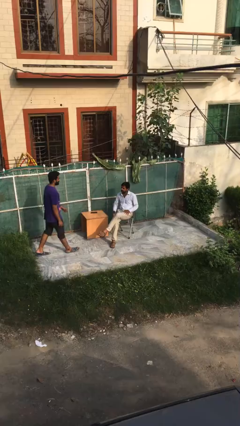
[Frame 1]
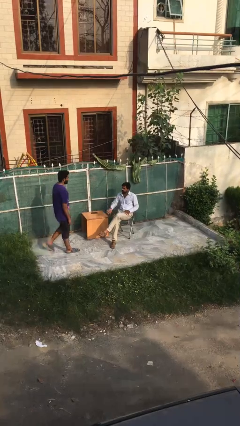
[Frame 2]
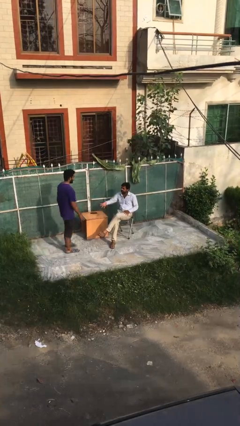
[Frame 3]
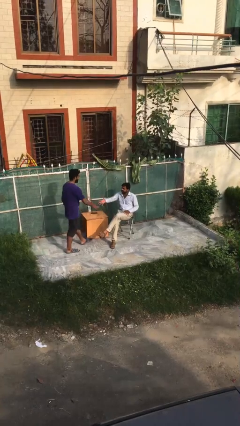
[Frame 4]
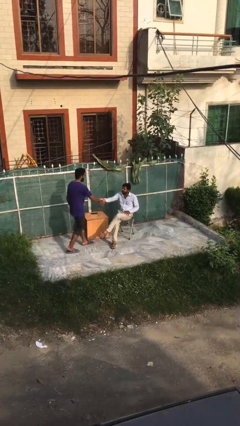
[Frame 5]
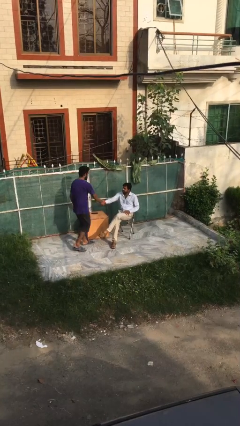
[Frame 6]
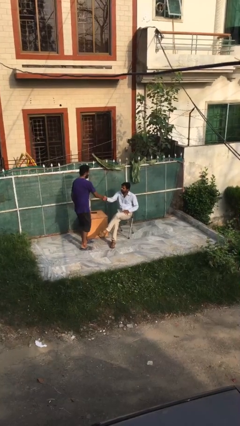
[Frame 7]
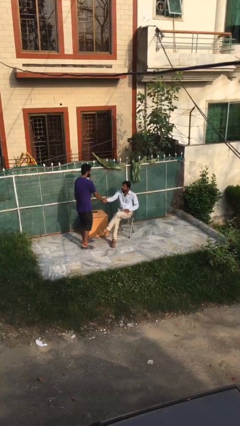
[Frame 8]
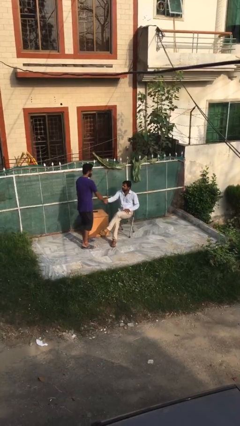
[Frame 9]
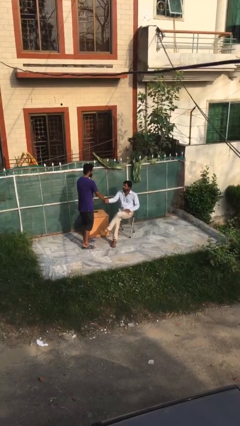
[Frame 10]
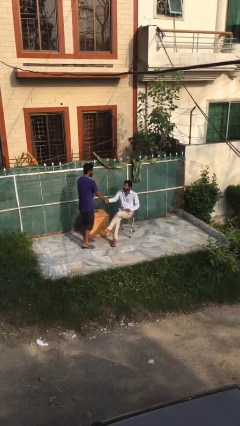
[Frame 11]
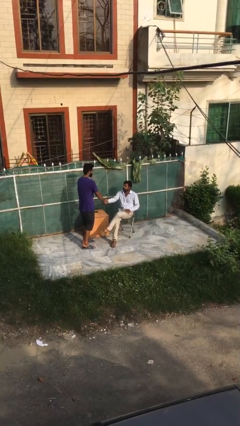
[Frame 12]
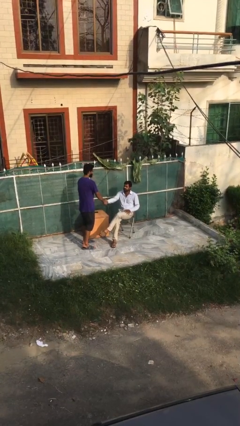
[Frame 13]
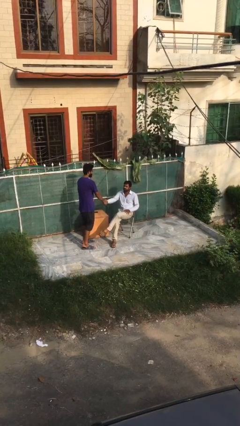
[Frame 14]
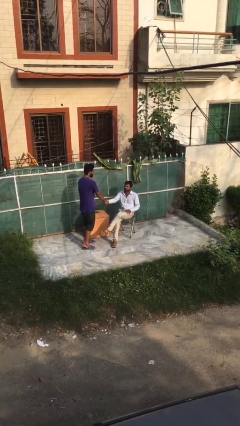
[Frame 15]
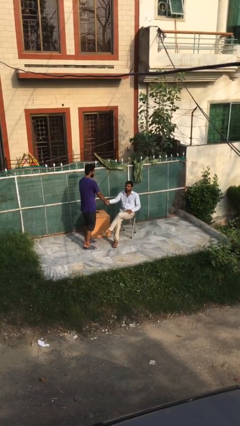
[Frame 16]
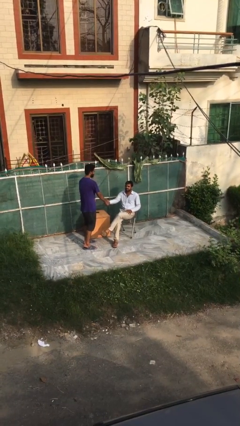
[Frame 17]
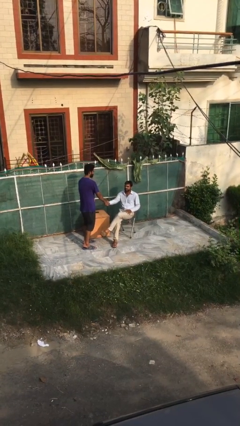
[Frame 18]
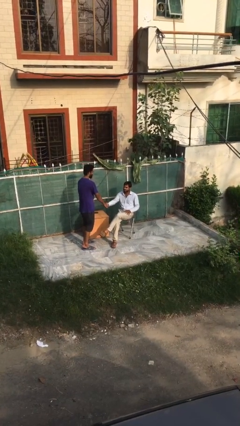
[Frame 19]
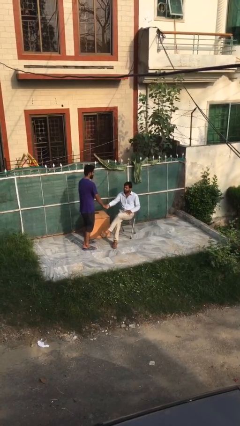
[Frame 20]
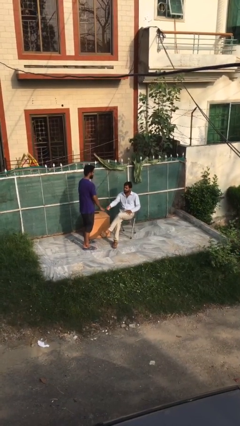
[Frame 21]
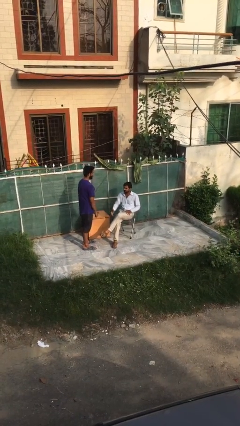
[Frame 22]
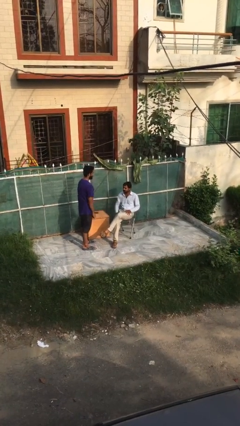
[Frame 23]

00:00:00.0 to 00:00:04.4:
person shakes hand

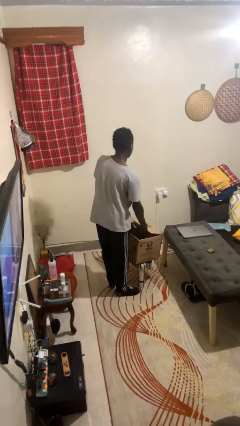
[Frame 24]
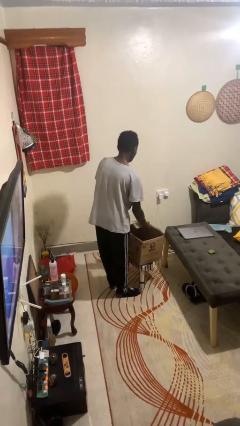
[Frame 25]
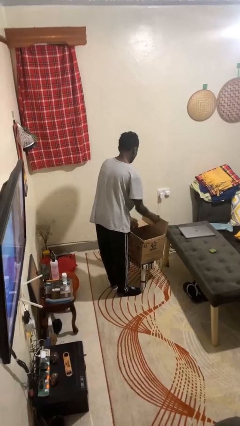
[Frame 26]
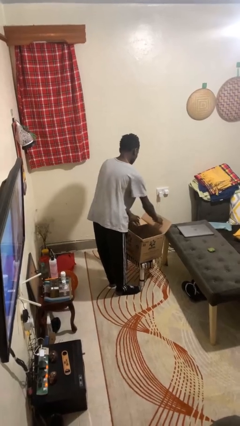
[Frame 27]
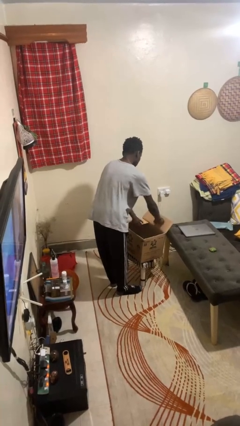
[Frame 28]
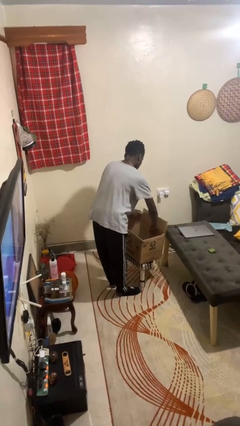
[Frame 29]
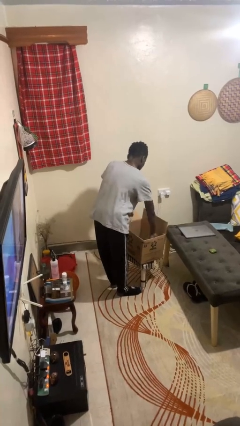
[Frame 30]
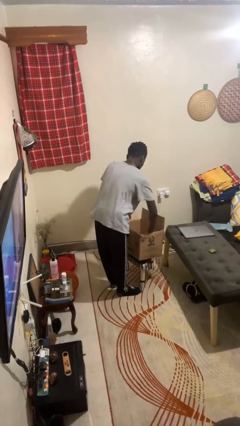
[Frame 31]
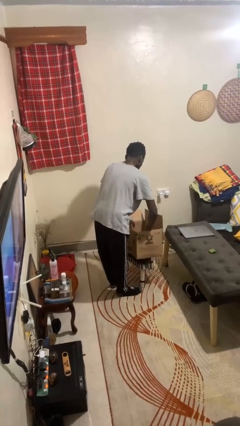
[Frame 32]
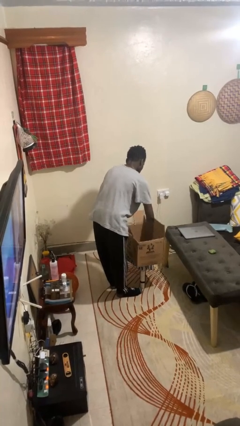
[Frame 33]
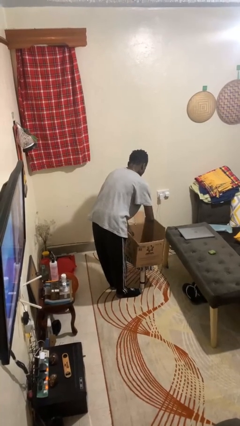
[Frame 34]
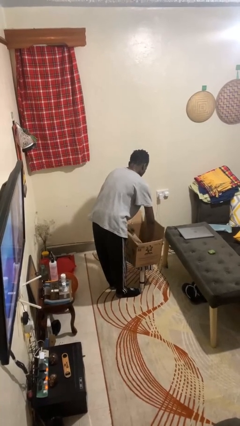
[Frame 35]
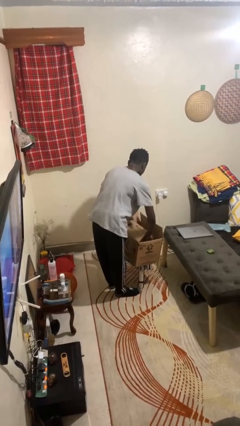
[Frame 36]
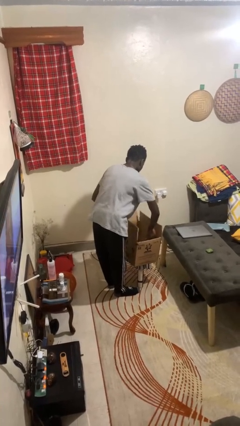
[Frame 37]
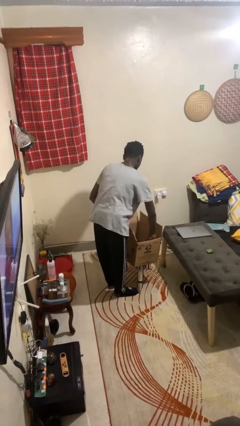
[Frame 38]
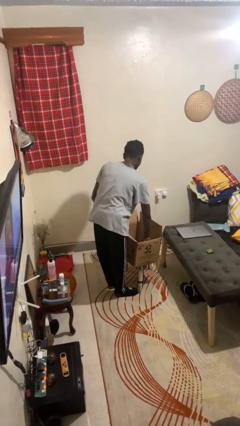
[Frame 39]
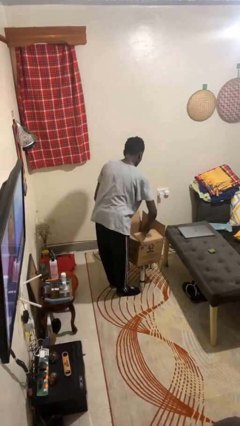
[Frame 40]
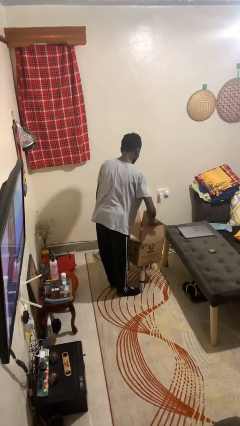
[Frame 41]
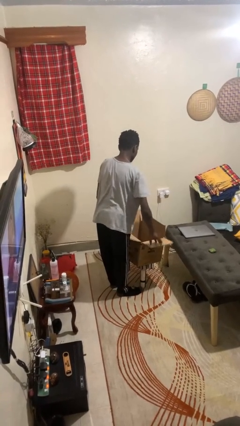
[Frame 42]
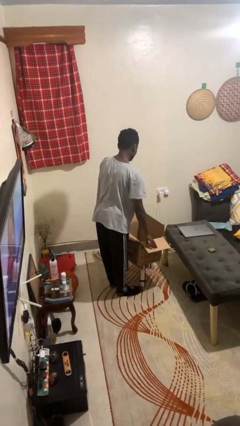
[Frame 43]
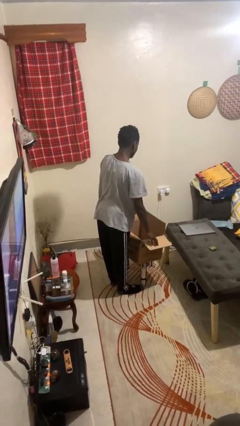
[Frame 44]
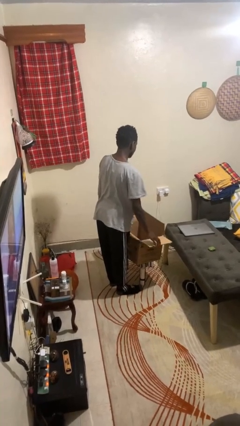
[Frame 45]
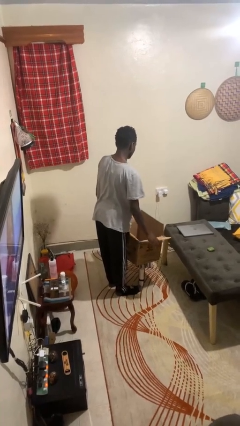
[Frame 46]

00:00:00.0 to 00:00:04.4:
person opens box

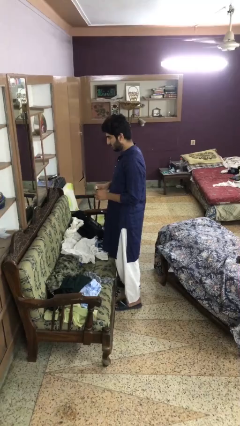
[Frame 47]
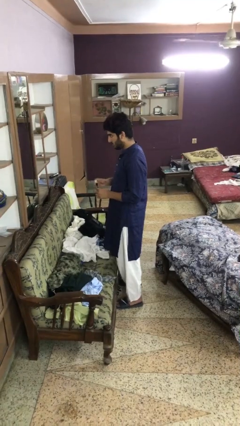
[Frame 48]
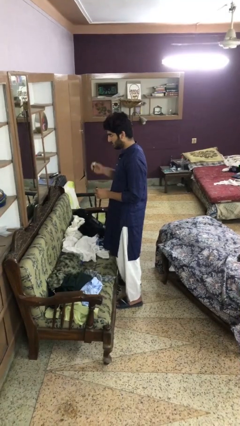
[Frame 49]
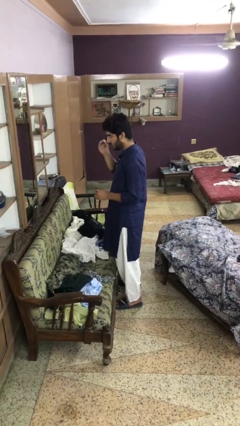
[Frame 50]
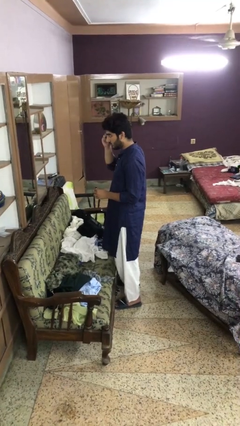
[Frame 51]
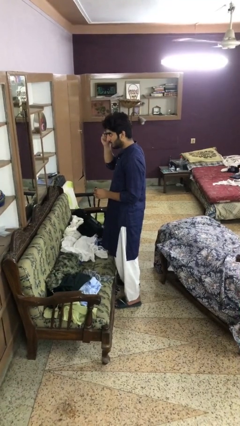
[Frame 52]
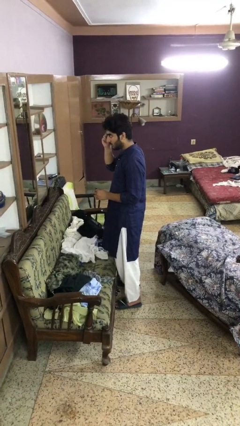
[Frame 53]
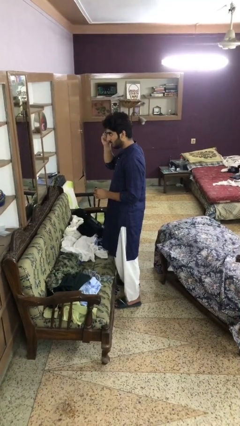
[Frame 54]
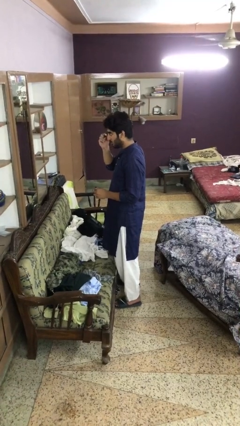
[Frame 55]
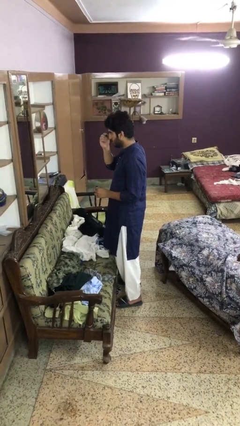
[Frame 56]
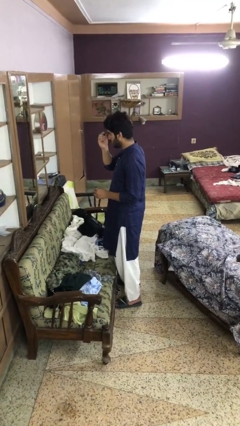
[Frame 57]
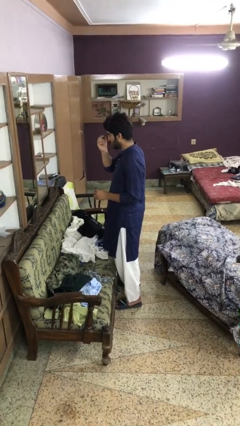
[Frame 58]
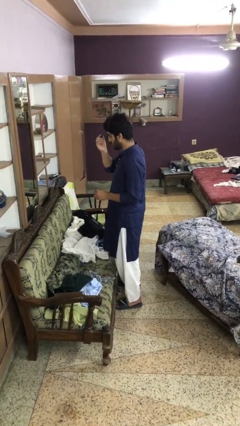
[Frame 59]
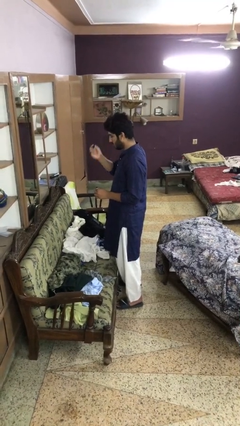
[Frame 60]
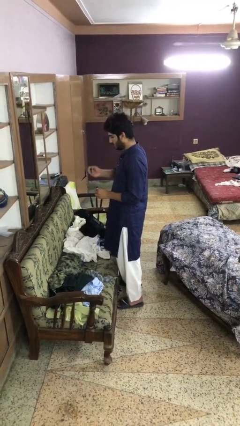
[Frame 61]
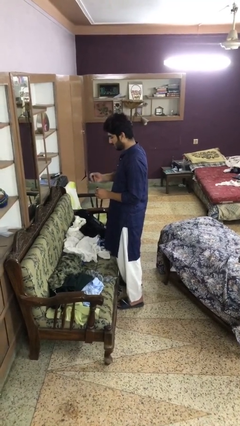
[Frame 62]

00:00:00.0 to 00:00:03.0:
person applies eye makeup

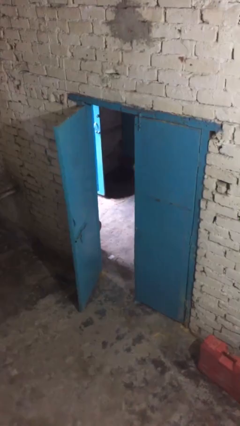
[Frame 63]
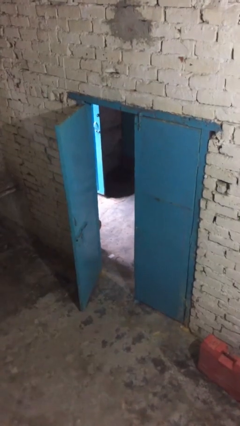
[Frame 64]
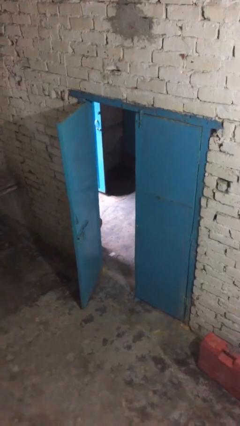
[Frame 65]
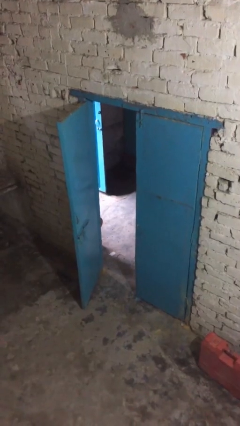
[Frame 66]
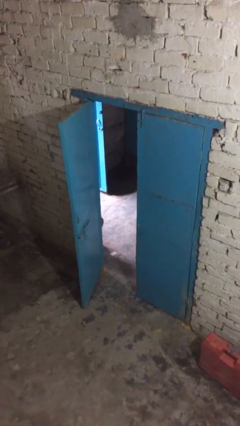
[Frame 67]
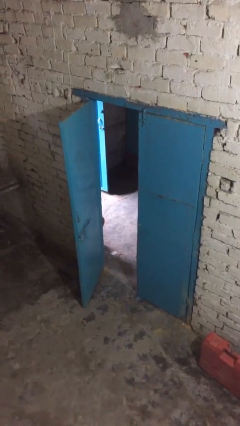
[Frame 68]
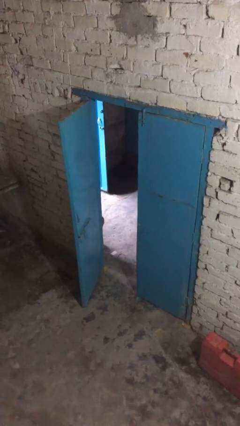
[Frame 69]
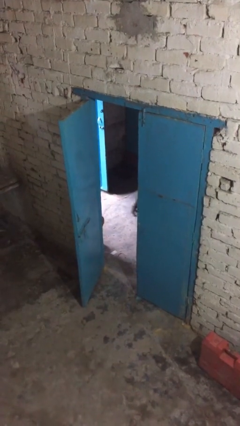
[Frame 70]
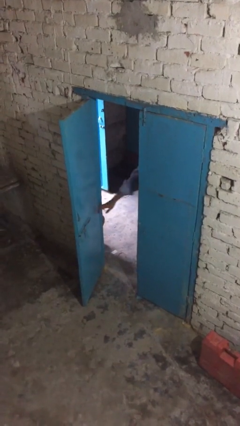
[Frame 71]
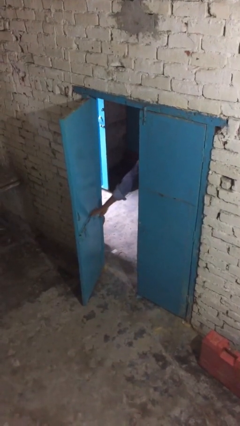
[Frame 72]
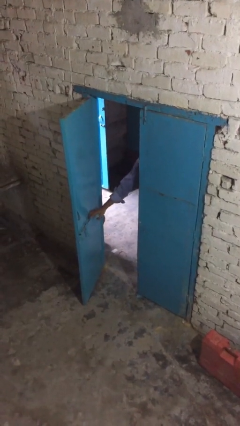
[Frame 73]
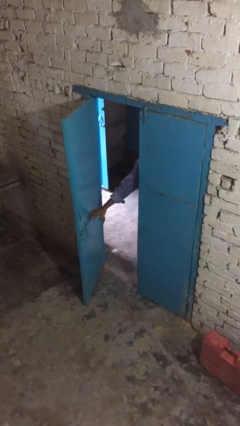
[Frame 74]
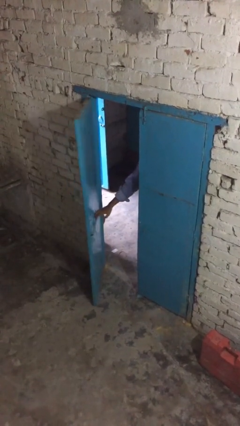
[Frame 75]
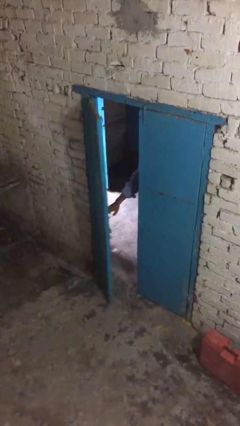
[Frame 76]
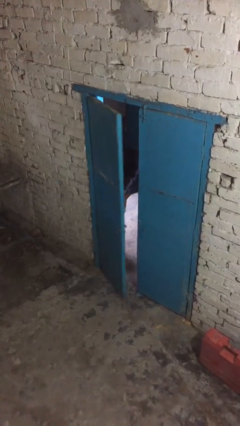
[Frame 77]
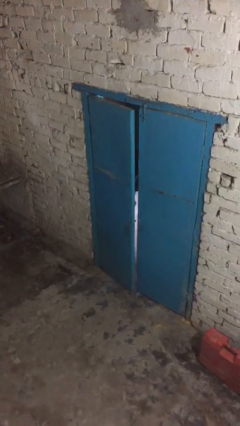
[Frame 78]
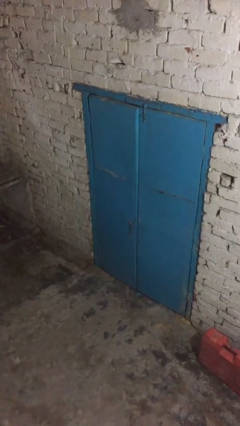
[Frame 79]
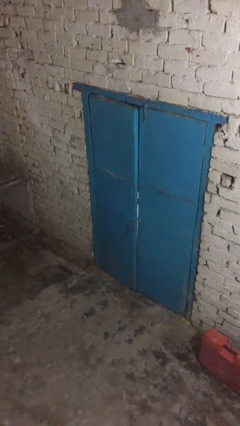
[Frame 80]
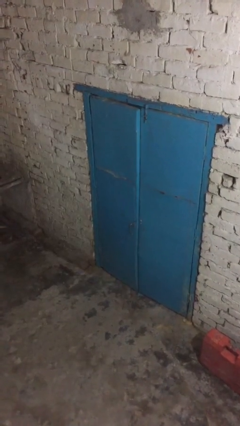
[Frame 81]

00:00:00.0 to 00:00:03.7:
person closes facility door

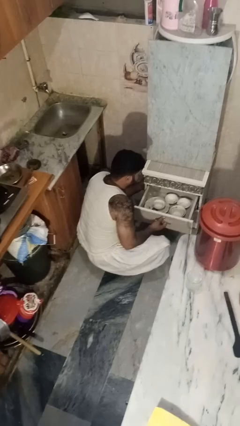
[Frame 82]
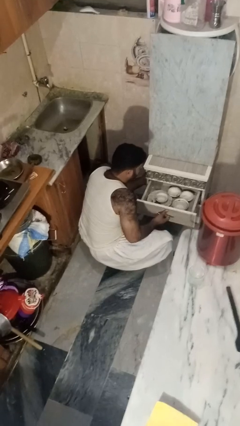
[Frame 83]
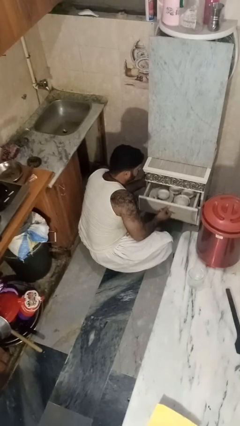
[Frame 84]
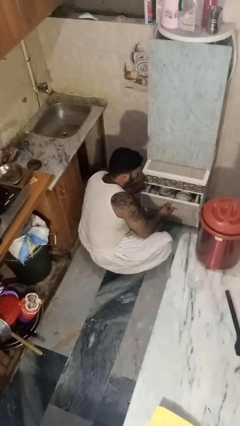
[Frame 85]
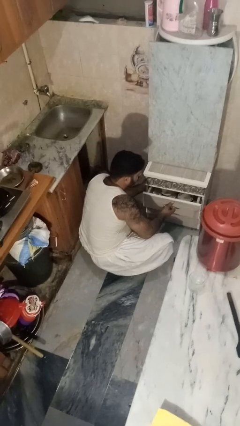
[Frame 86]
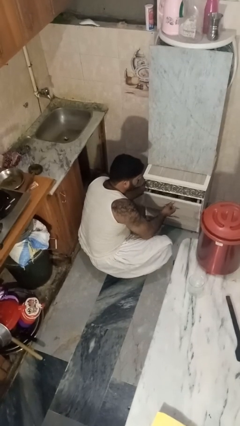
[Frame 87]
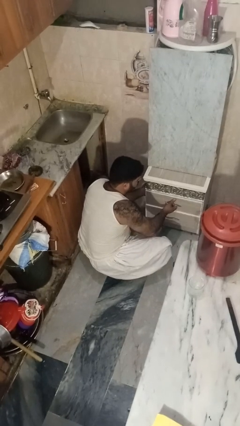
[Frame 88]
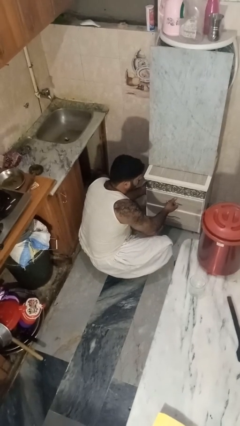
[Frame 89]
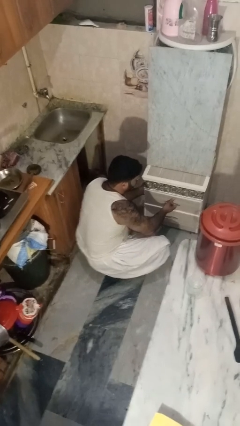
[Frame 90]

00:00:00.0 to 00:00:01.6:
person closes kitchen drawer

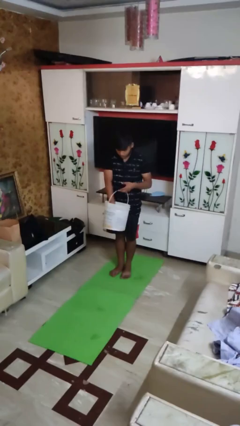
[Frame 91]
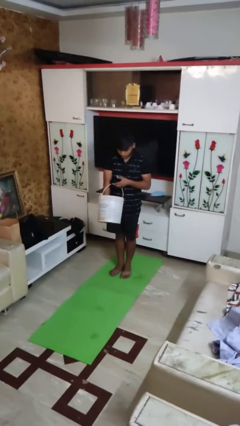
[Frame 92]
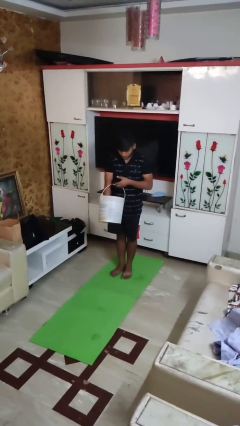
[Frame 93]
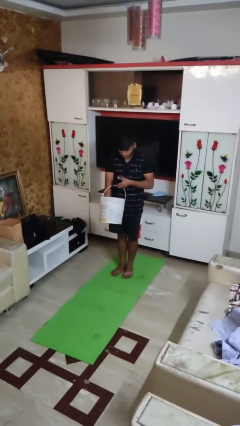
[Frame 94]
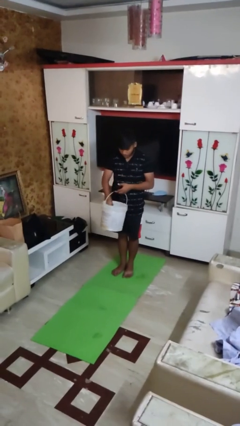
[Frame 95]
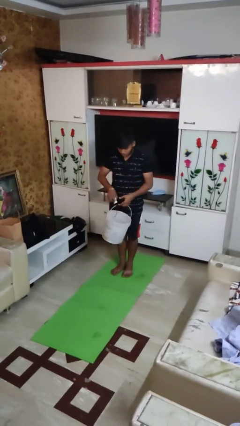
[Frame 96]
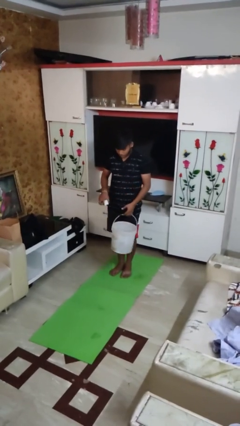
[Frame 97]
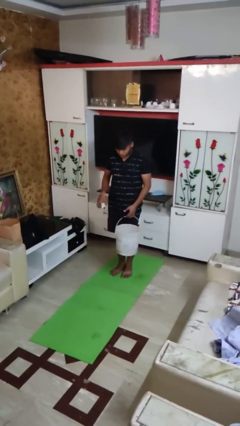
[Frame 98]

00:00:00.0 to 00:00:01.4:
person takes object from basket
